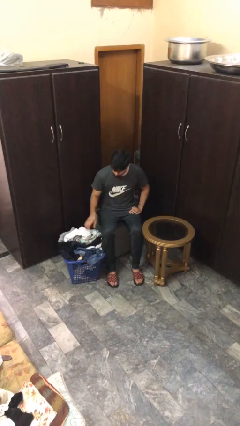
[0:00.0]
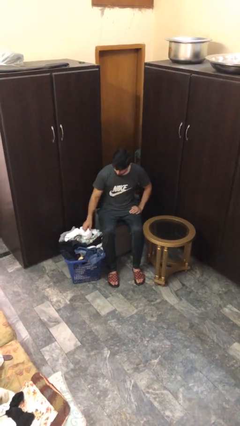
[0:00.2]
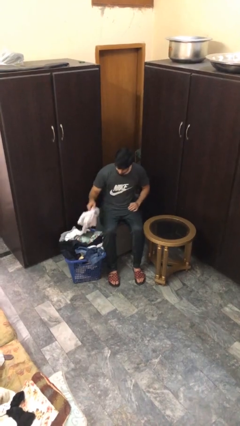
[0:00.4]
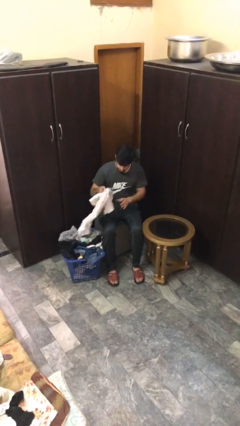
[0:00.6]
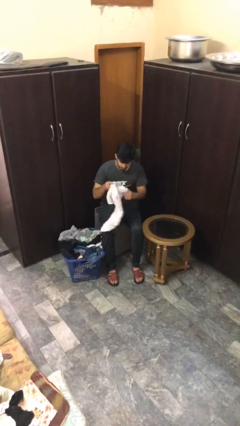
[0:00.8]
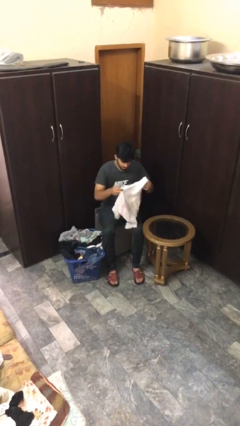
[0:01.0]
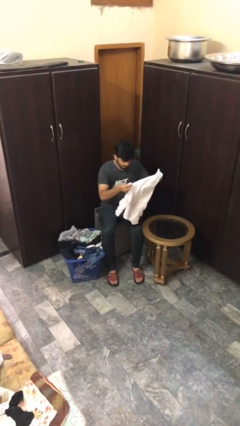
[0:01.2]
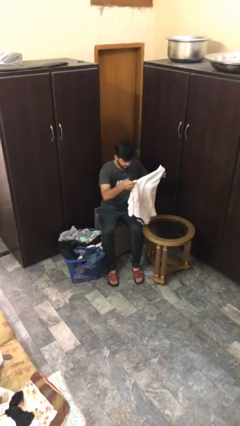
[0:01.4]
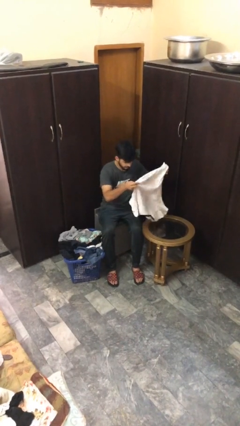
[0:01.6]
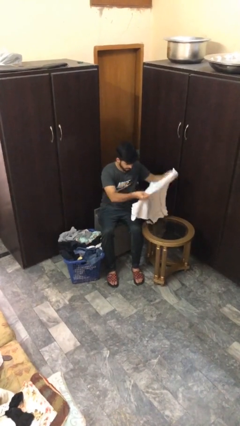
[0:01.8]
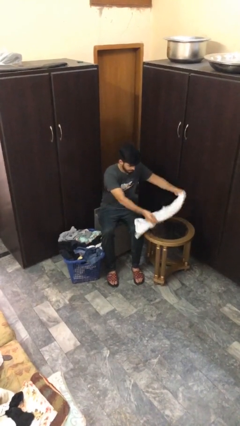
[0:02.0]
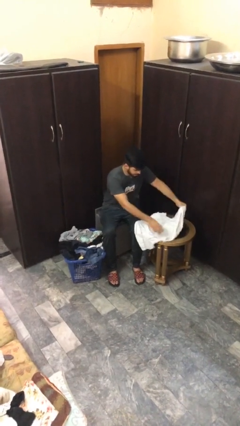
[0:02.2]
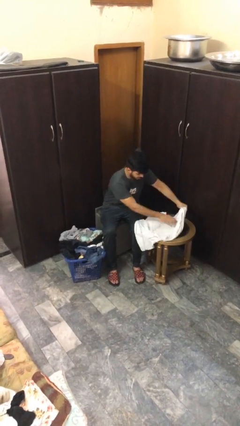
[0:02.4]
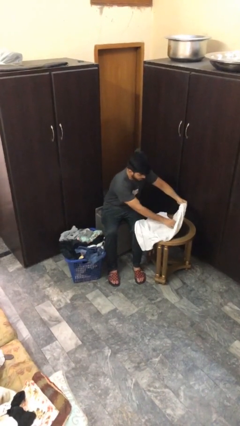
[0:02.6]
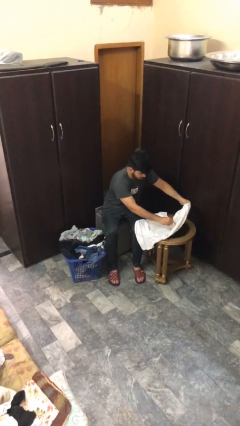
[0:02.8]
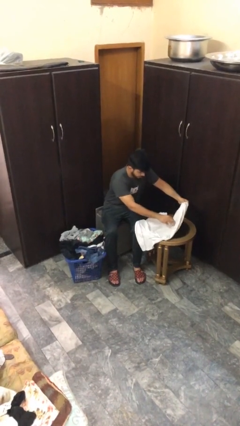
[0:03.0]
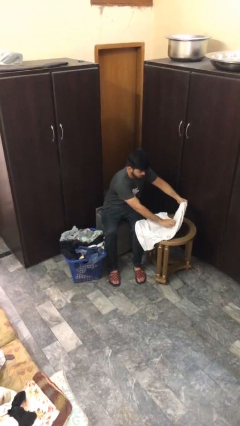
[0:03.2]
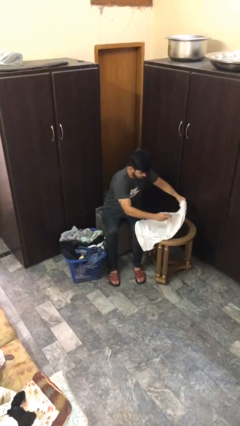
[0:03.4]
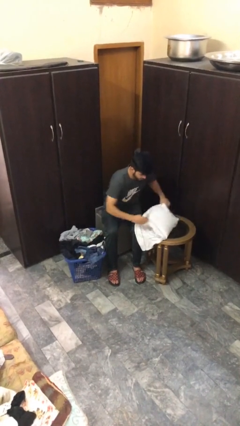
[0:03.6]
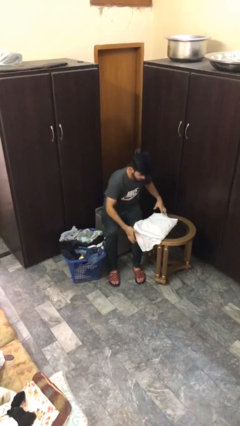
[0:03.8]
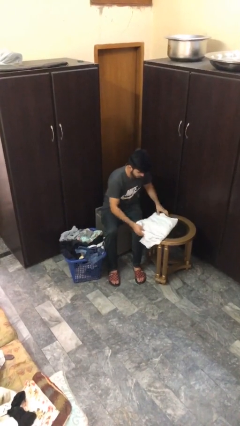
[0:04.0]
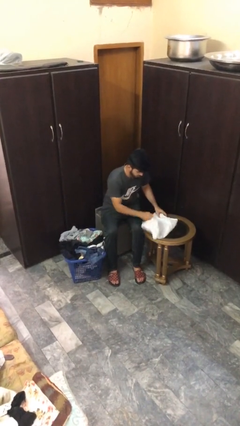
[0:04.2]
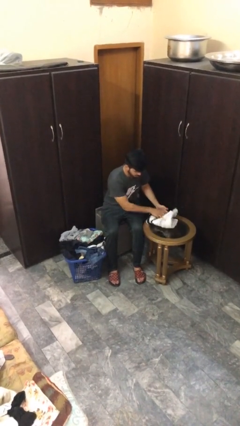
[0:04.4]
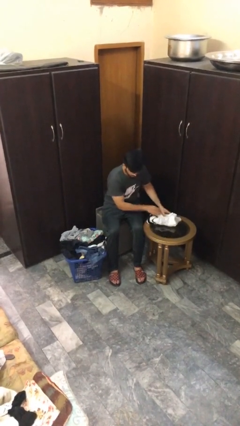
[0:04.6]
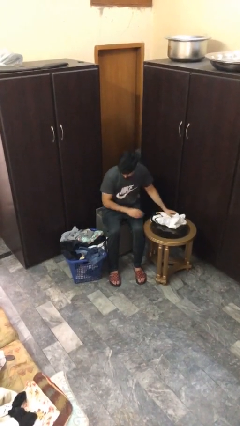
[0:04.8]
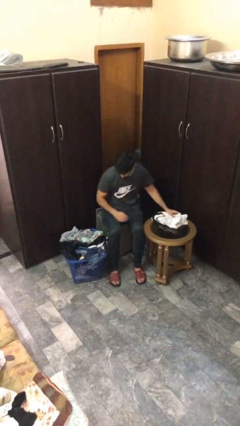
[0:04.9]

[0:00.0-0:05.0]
person folds shirt

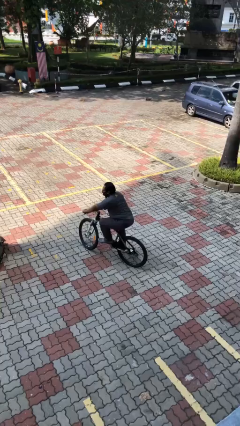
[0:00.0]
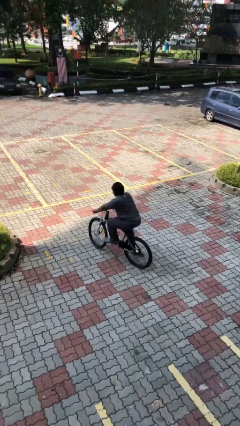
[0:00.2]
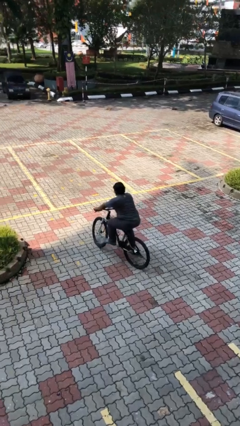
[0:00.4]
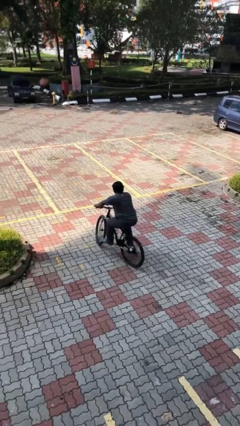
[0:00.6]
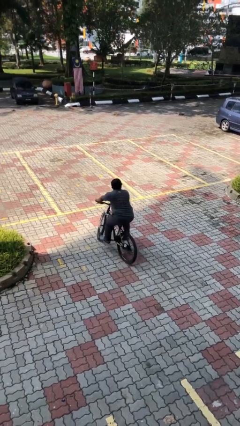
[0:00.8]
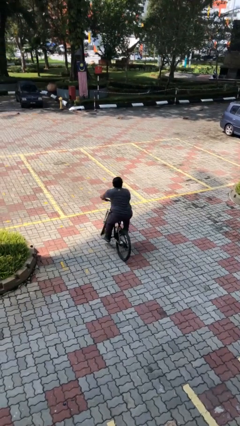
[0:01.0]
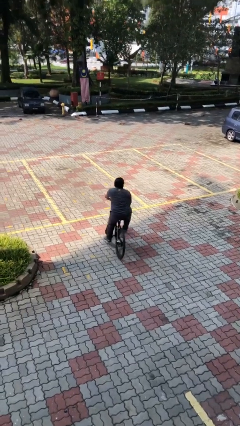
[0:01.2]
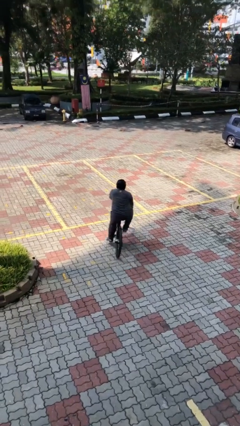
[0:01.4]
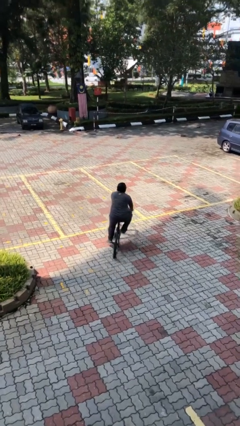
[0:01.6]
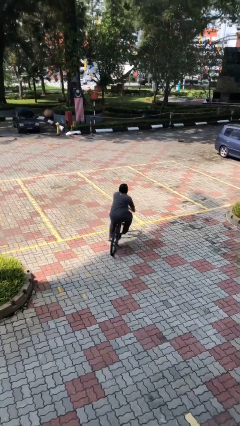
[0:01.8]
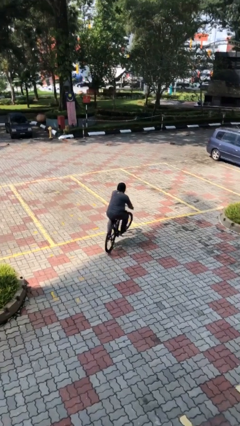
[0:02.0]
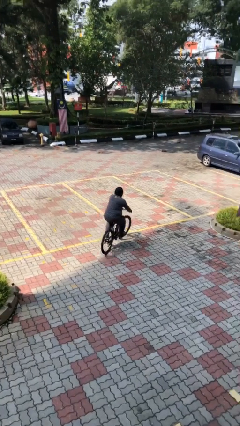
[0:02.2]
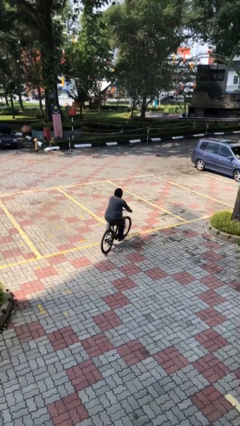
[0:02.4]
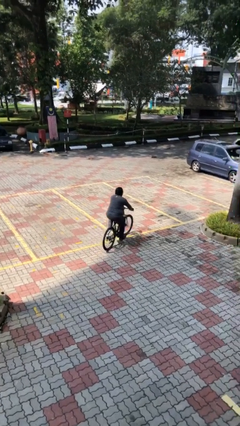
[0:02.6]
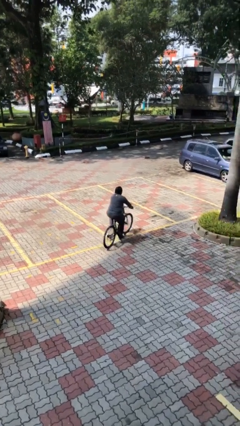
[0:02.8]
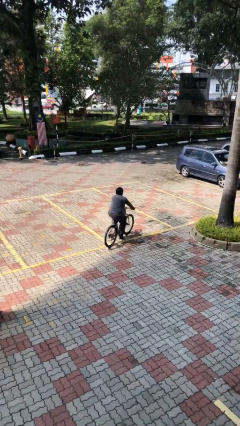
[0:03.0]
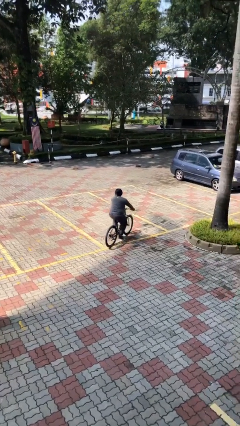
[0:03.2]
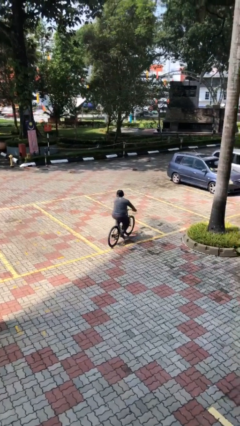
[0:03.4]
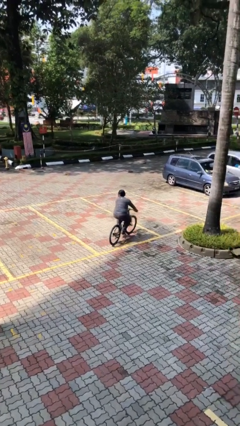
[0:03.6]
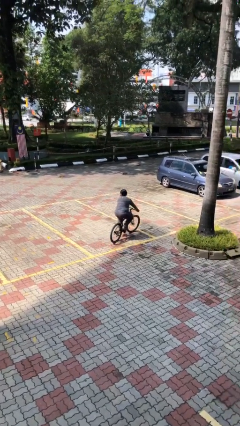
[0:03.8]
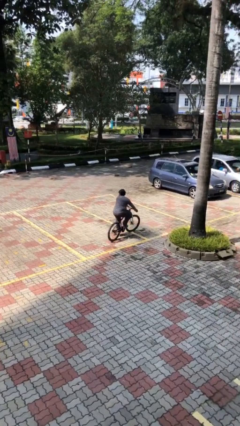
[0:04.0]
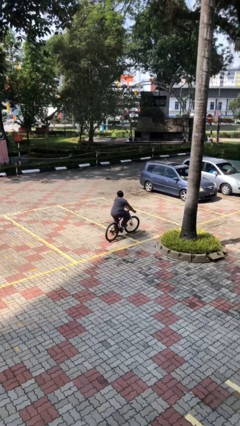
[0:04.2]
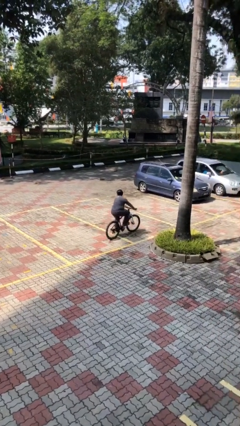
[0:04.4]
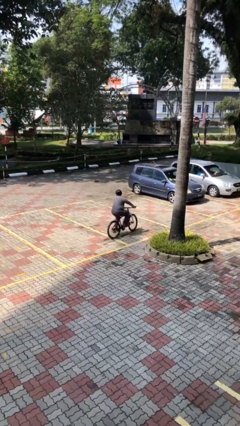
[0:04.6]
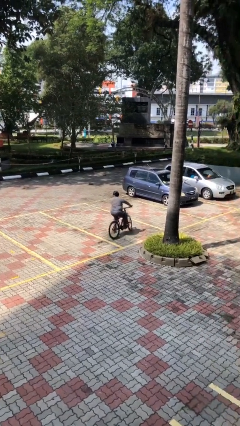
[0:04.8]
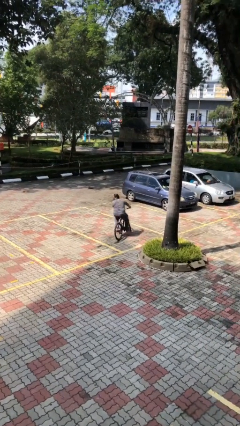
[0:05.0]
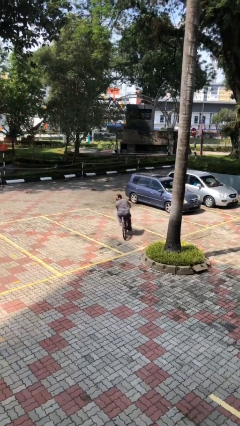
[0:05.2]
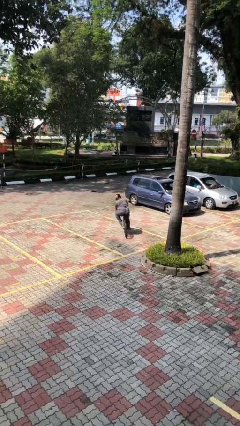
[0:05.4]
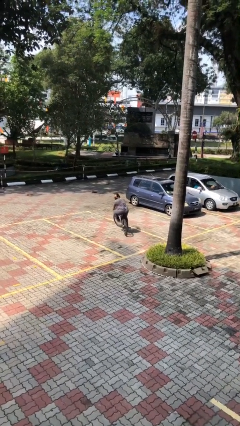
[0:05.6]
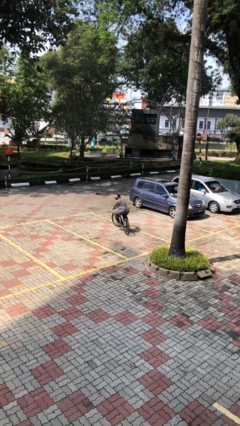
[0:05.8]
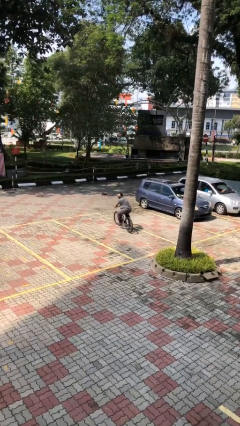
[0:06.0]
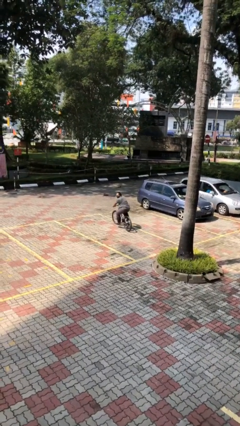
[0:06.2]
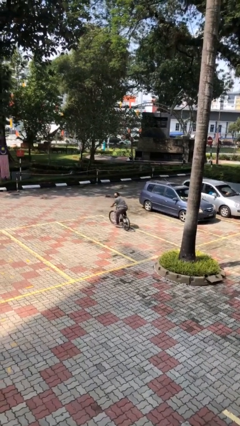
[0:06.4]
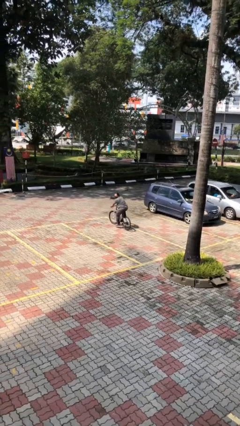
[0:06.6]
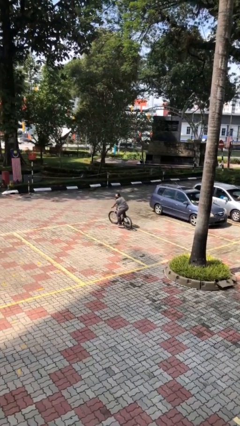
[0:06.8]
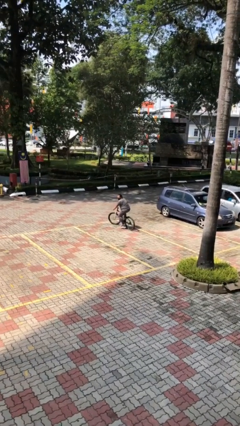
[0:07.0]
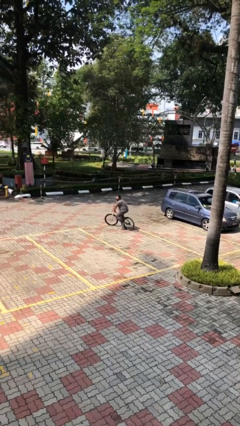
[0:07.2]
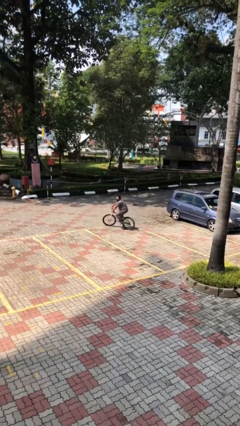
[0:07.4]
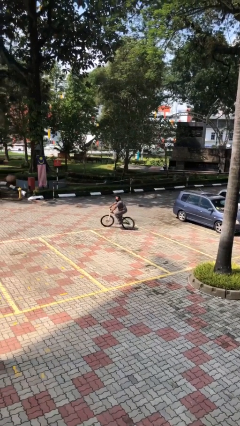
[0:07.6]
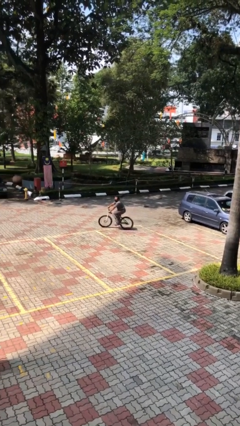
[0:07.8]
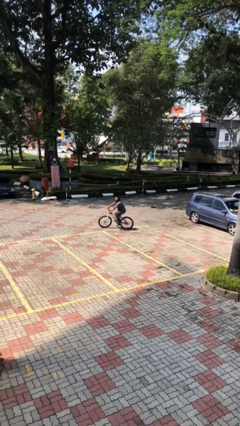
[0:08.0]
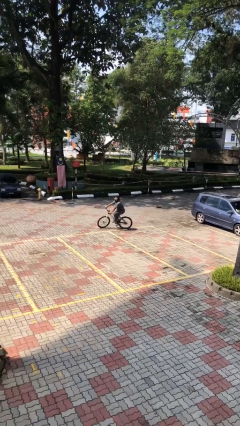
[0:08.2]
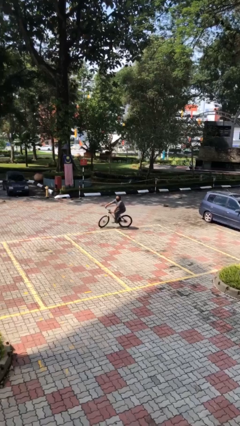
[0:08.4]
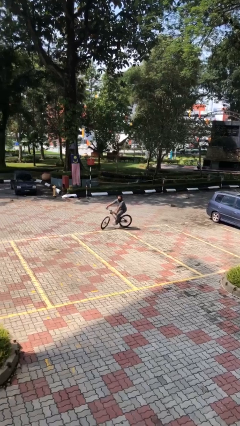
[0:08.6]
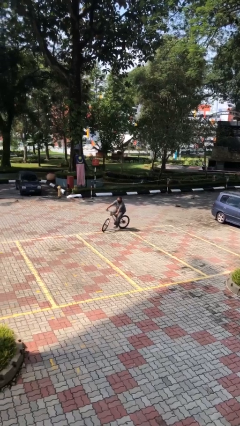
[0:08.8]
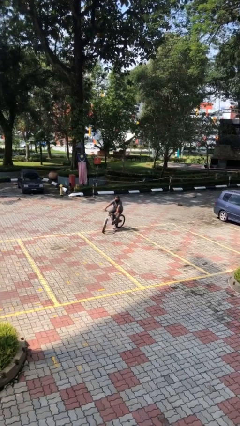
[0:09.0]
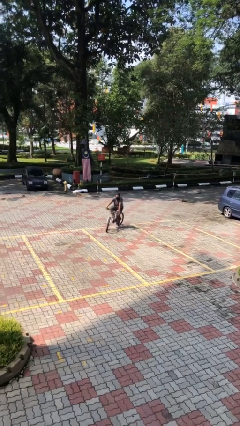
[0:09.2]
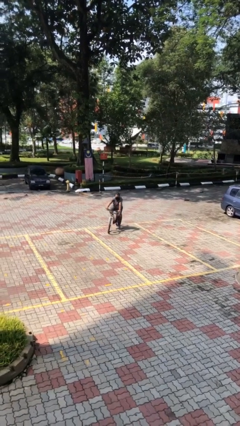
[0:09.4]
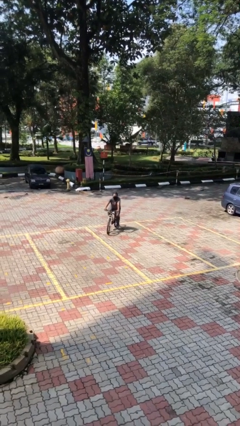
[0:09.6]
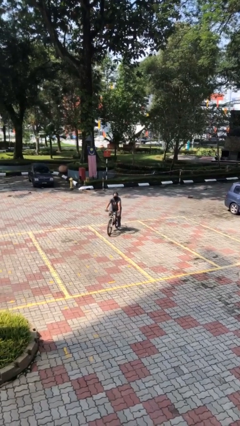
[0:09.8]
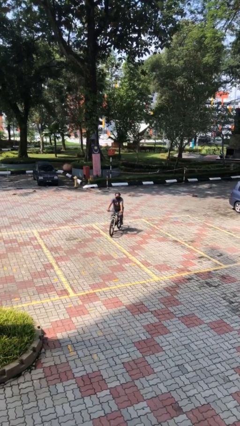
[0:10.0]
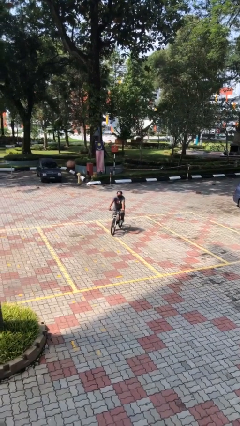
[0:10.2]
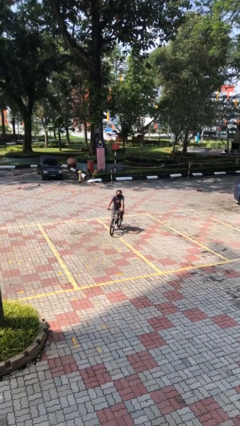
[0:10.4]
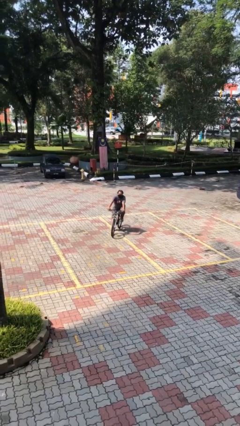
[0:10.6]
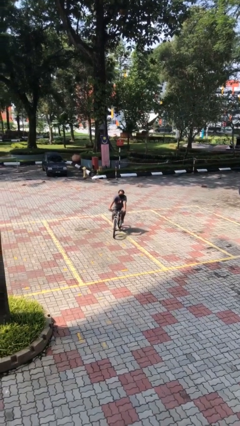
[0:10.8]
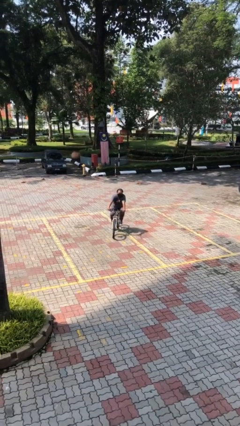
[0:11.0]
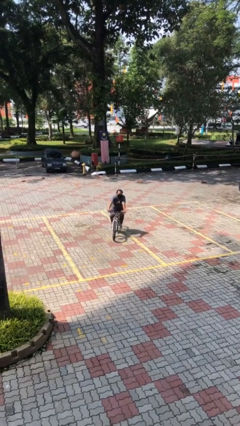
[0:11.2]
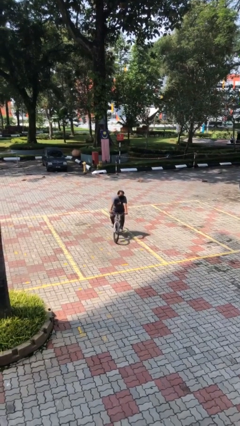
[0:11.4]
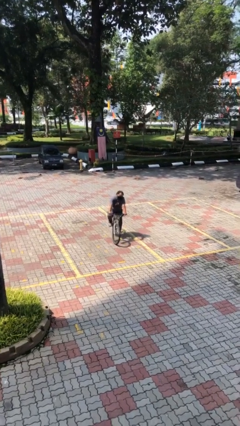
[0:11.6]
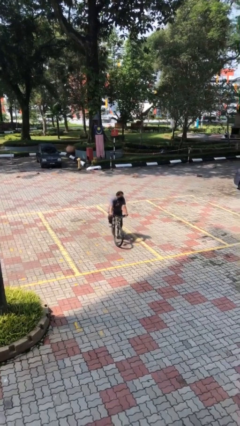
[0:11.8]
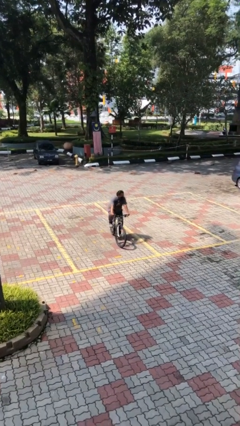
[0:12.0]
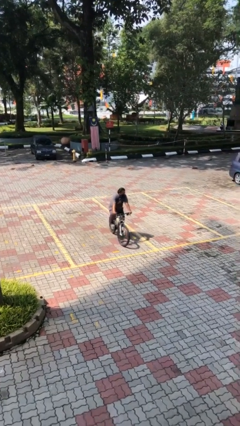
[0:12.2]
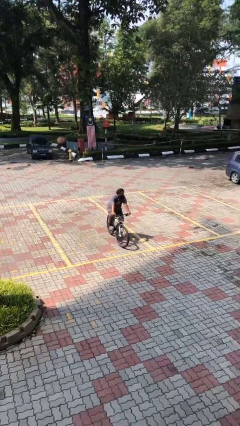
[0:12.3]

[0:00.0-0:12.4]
person rides bicycle

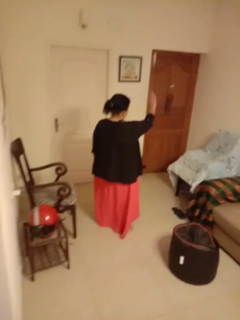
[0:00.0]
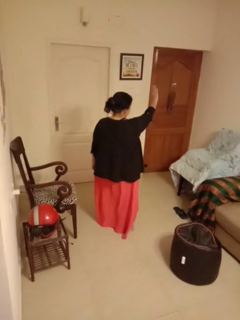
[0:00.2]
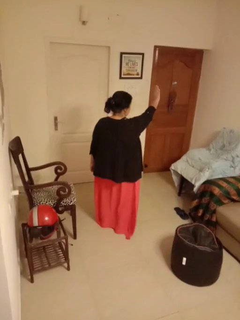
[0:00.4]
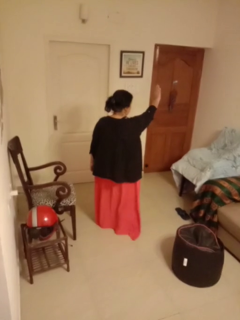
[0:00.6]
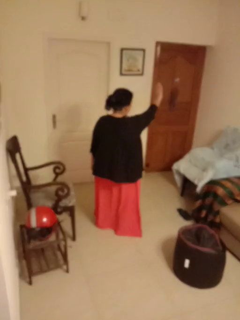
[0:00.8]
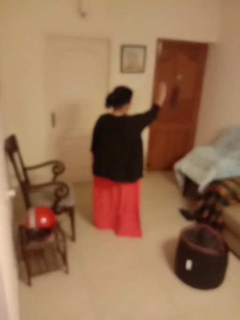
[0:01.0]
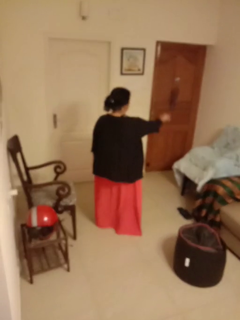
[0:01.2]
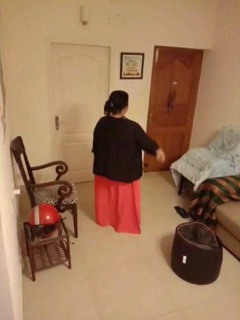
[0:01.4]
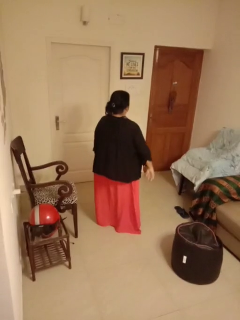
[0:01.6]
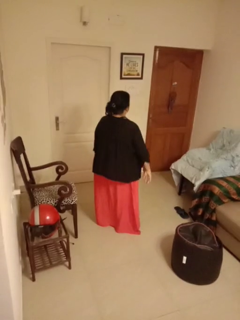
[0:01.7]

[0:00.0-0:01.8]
person gestures stop
